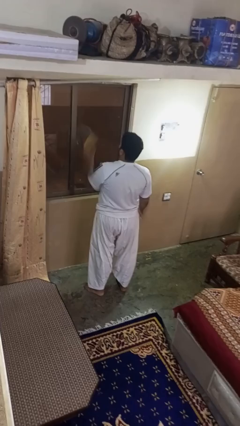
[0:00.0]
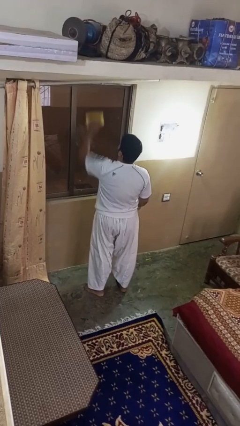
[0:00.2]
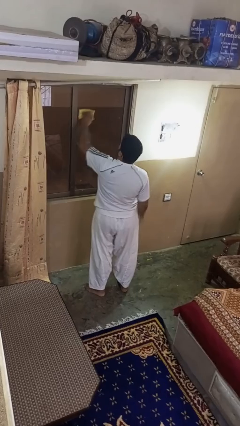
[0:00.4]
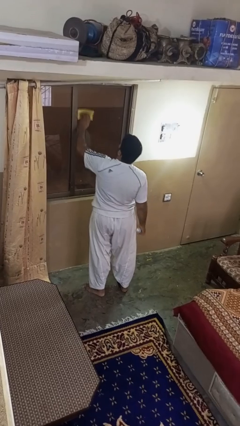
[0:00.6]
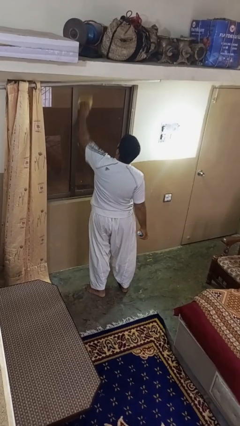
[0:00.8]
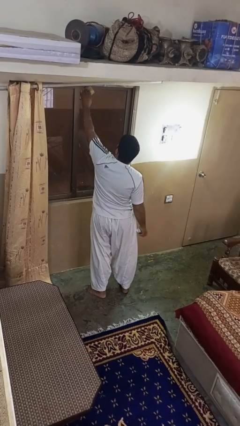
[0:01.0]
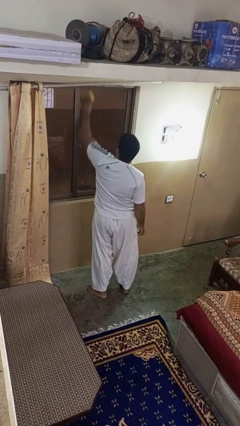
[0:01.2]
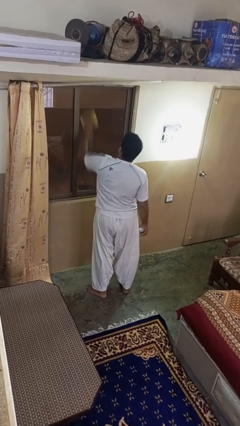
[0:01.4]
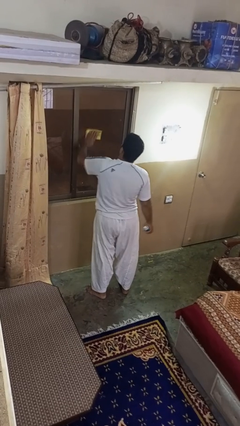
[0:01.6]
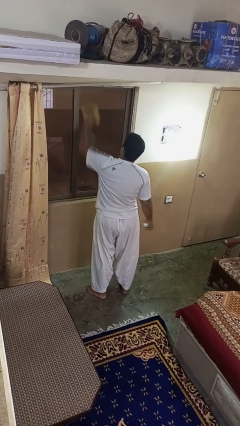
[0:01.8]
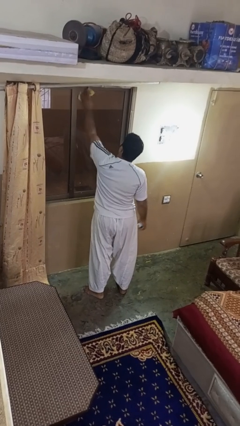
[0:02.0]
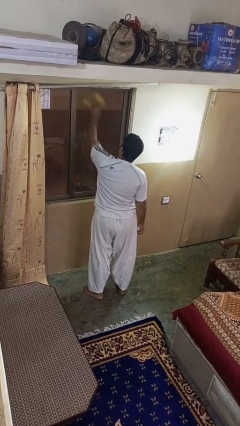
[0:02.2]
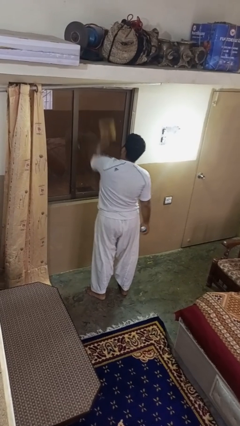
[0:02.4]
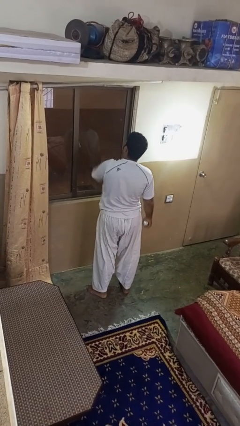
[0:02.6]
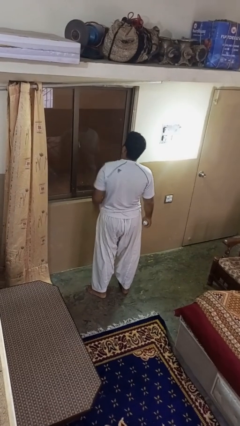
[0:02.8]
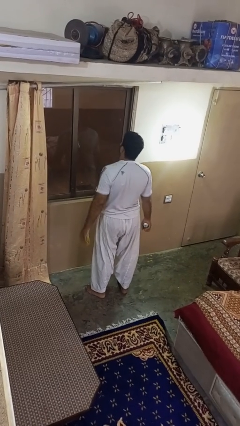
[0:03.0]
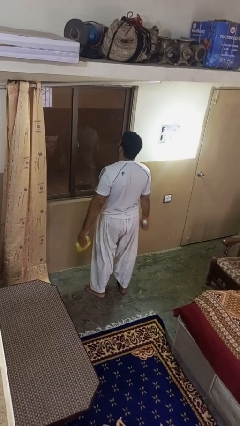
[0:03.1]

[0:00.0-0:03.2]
person washes window

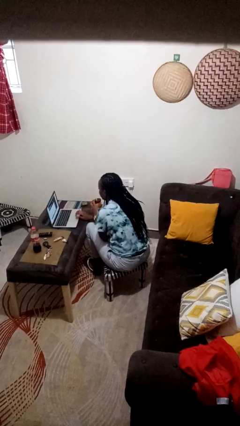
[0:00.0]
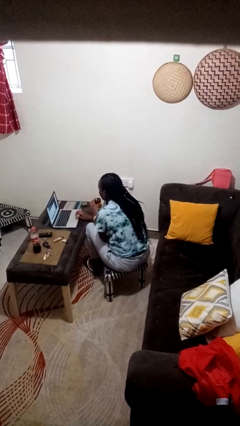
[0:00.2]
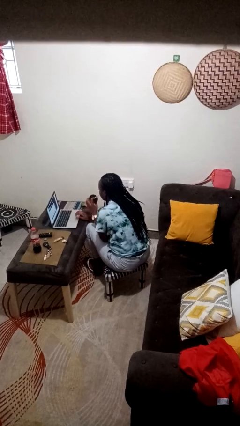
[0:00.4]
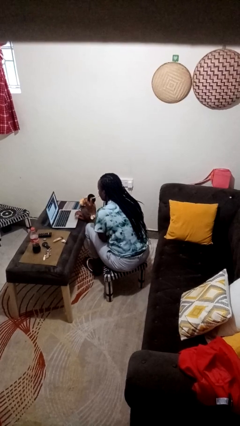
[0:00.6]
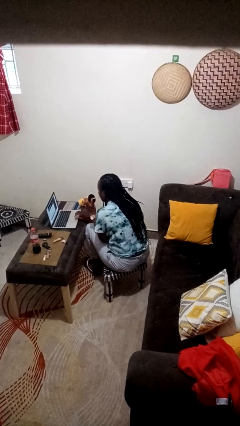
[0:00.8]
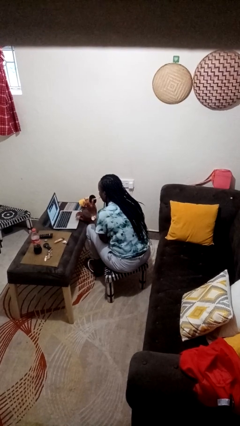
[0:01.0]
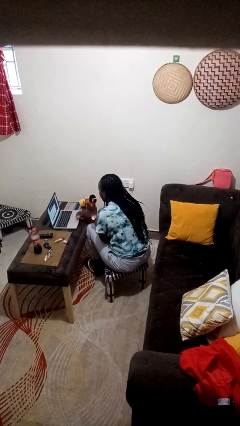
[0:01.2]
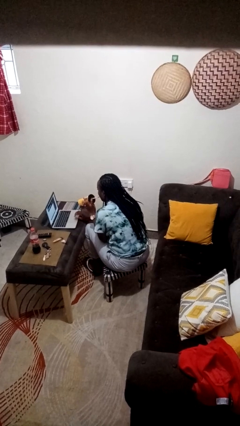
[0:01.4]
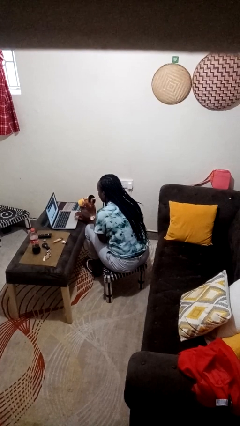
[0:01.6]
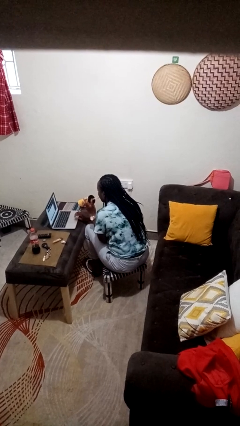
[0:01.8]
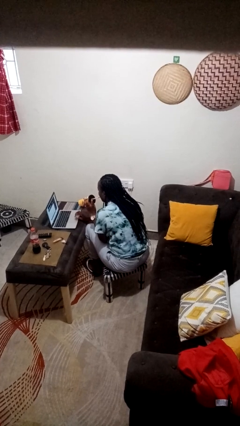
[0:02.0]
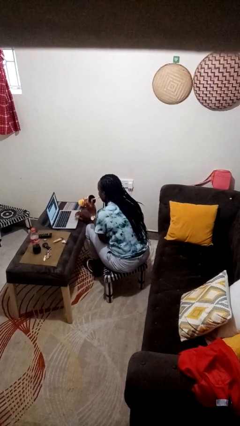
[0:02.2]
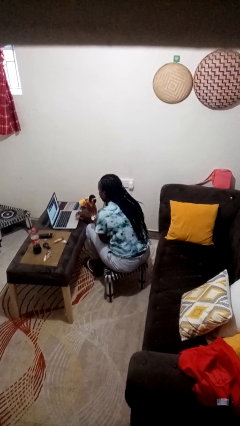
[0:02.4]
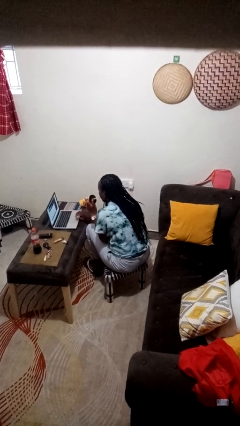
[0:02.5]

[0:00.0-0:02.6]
person drinks from straw

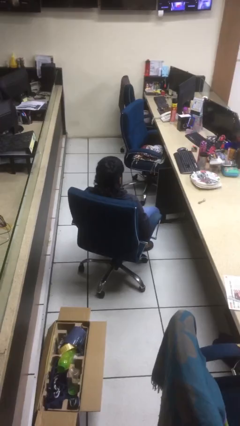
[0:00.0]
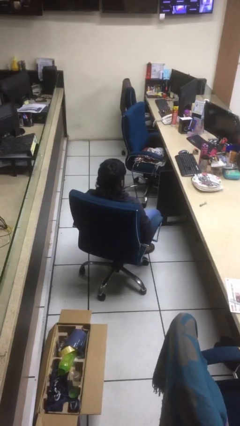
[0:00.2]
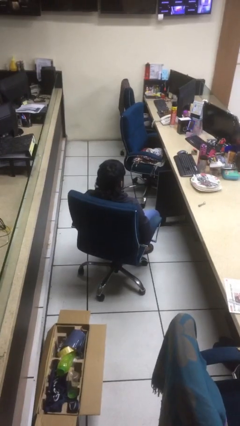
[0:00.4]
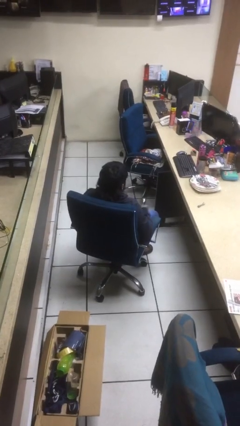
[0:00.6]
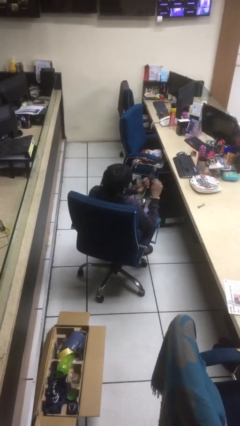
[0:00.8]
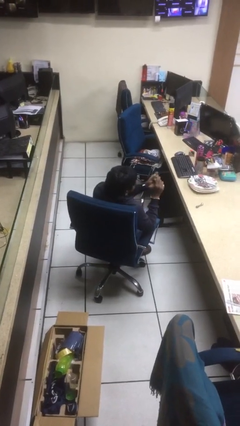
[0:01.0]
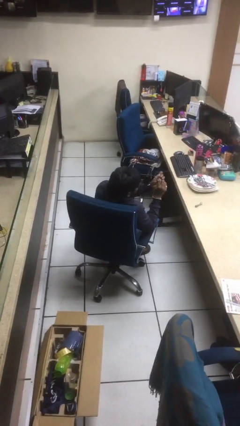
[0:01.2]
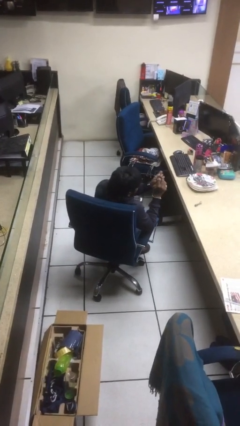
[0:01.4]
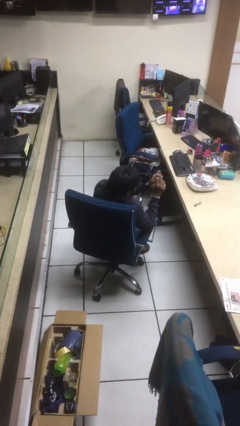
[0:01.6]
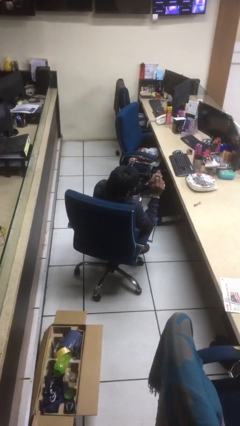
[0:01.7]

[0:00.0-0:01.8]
person files fingernails

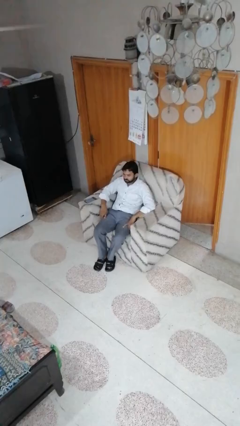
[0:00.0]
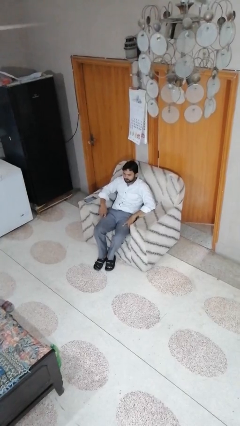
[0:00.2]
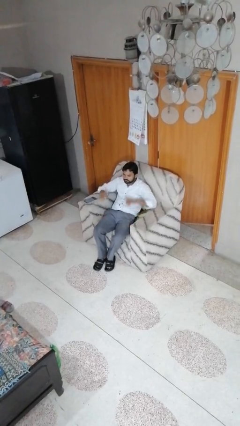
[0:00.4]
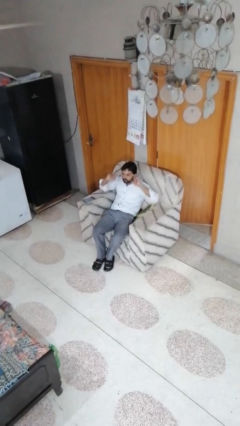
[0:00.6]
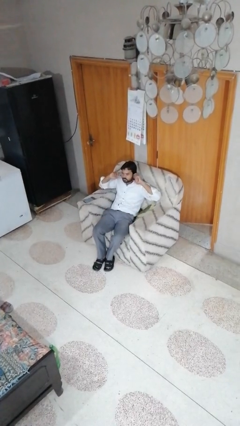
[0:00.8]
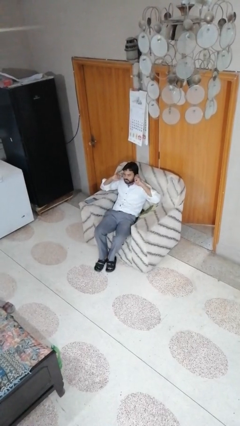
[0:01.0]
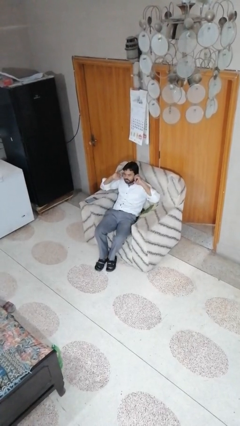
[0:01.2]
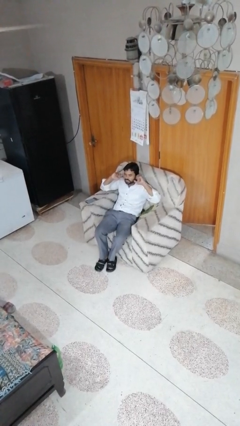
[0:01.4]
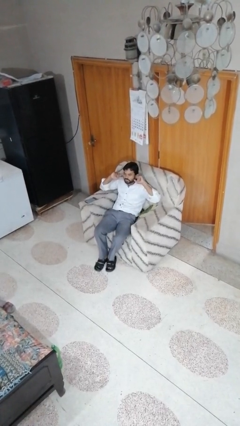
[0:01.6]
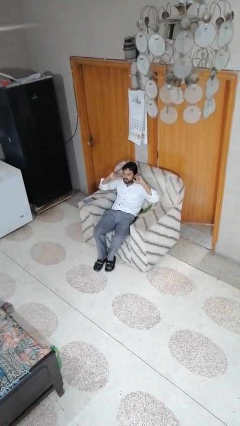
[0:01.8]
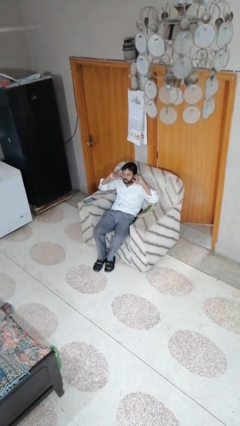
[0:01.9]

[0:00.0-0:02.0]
person puts fingers in ear

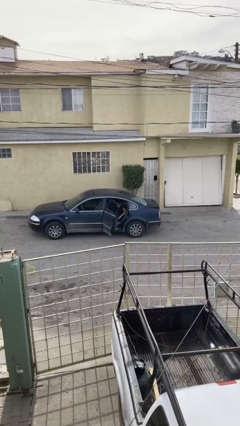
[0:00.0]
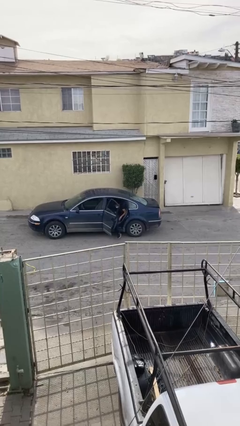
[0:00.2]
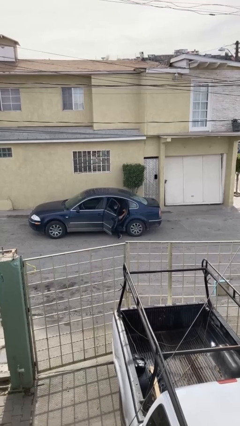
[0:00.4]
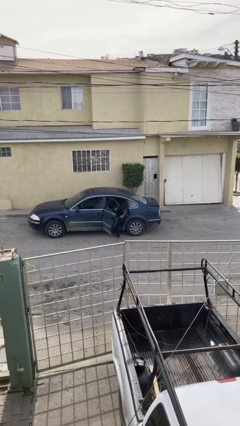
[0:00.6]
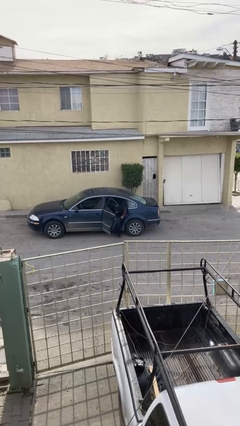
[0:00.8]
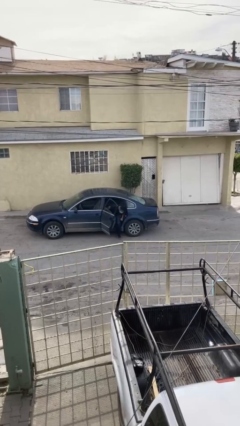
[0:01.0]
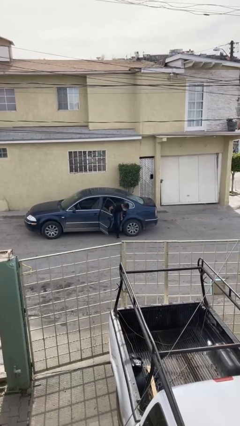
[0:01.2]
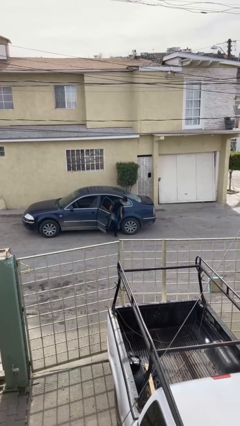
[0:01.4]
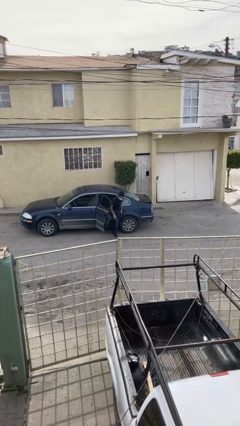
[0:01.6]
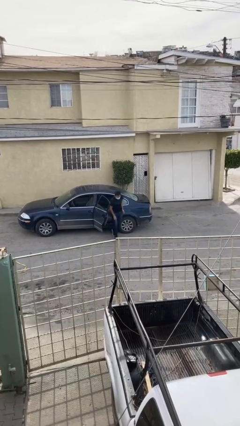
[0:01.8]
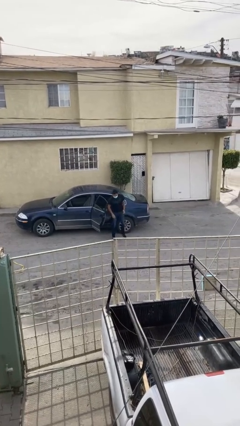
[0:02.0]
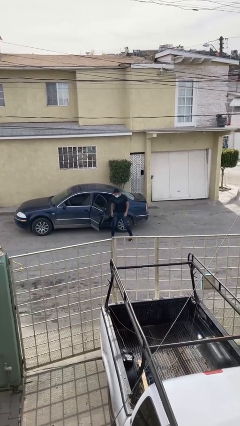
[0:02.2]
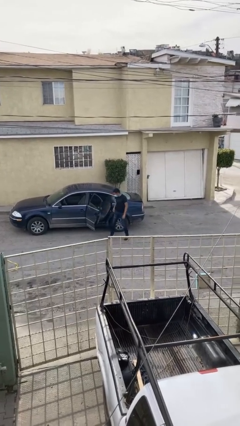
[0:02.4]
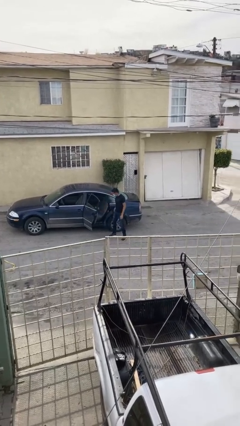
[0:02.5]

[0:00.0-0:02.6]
person exits car

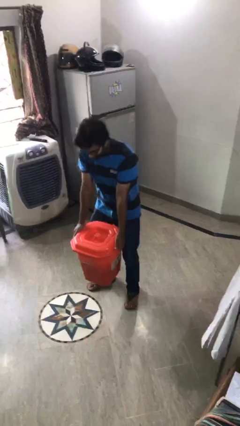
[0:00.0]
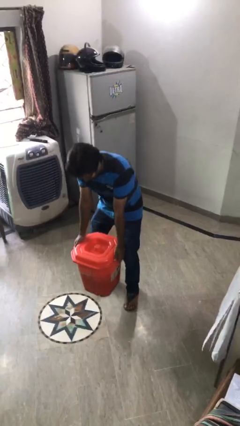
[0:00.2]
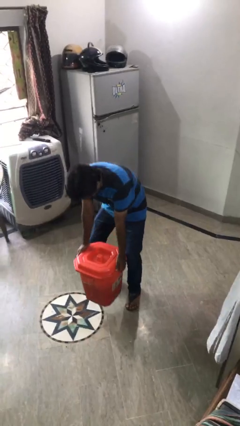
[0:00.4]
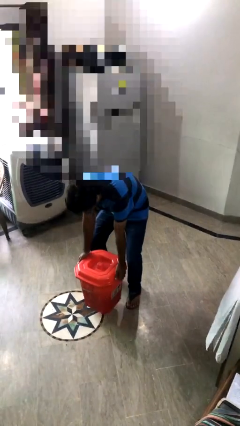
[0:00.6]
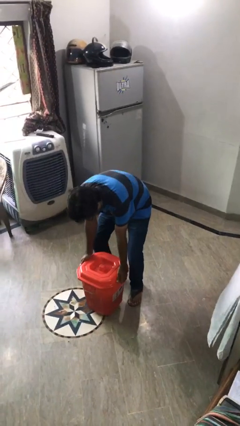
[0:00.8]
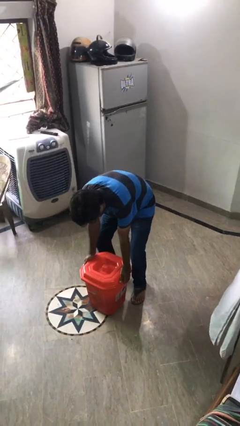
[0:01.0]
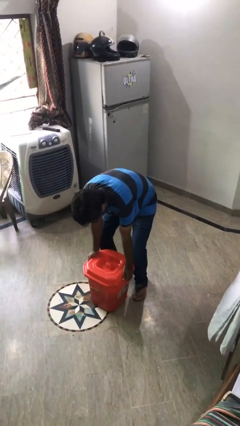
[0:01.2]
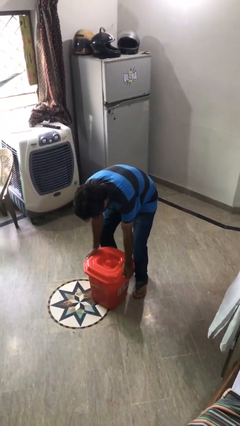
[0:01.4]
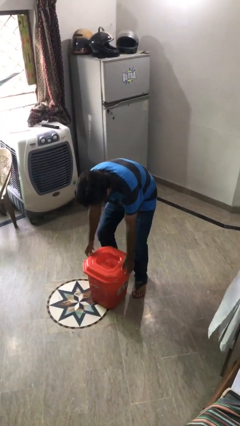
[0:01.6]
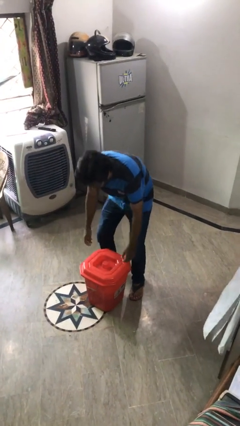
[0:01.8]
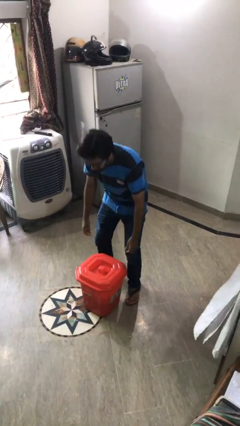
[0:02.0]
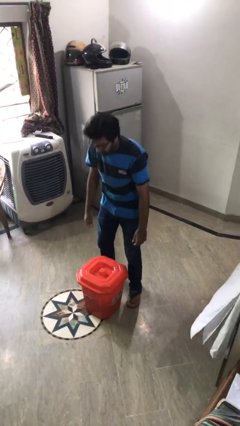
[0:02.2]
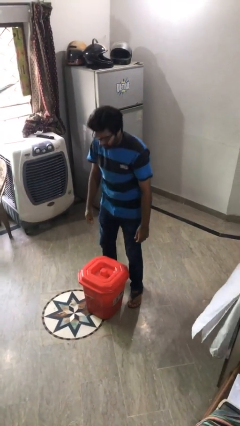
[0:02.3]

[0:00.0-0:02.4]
person puts down object on floor

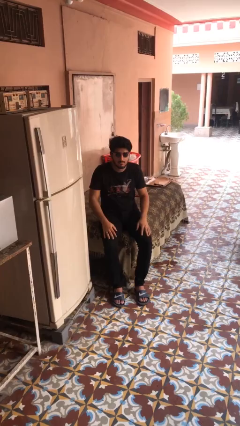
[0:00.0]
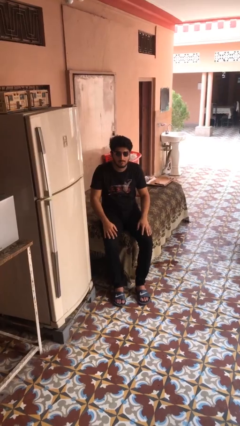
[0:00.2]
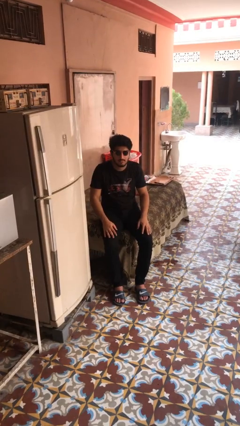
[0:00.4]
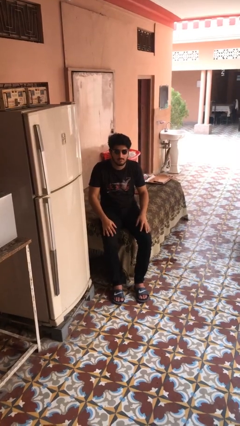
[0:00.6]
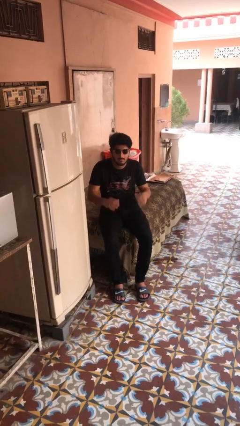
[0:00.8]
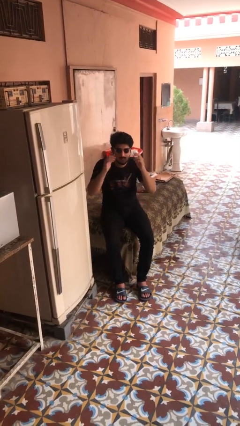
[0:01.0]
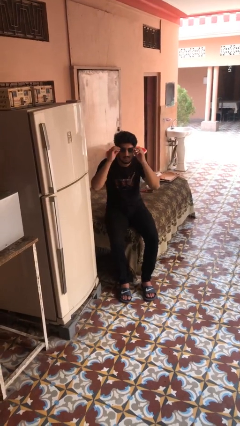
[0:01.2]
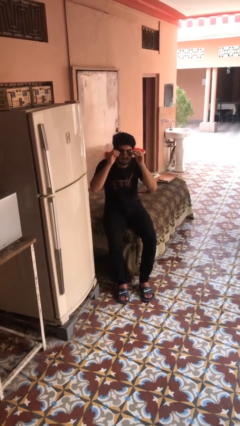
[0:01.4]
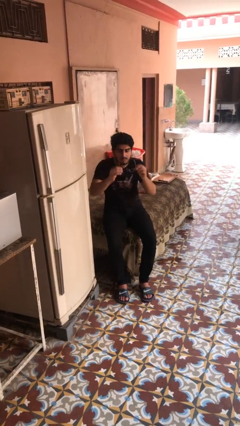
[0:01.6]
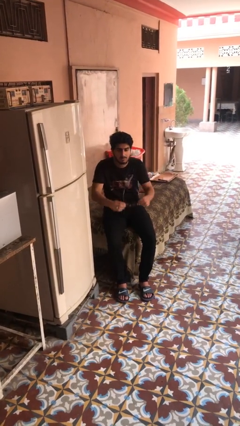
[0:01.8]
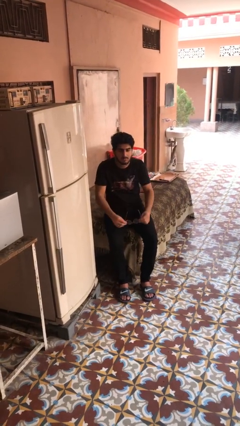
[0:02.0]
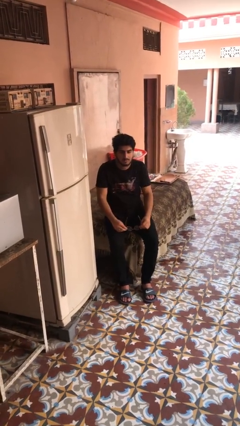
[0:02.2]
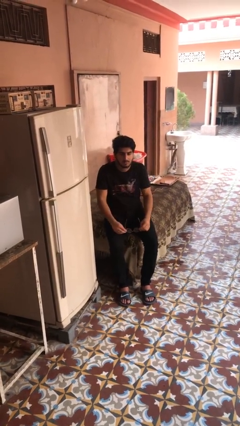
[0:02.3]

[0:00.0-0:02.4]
person takes off sunglasses
